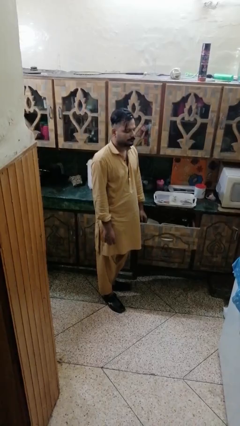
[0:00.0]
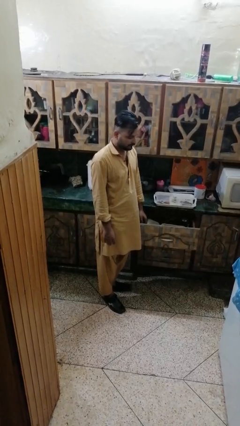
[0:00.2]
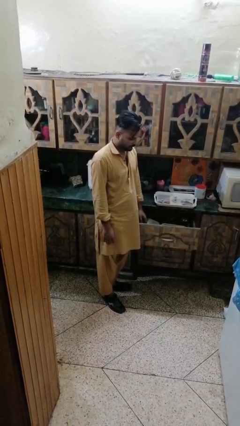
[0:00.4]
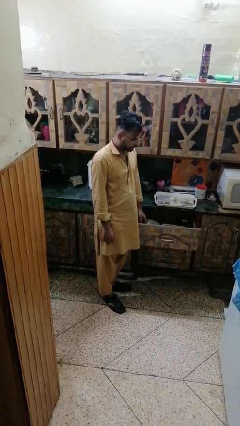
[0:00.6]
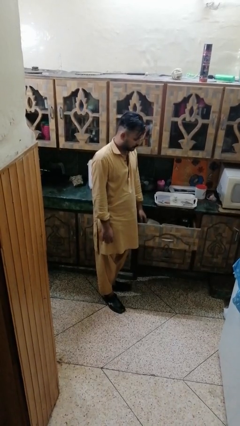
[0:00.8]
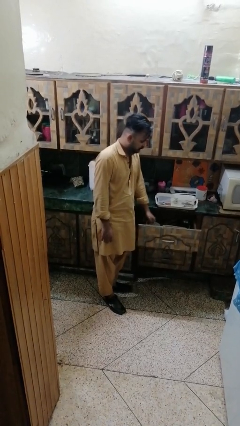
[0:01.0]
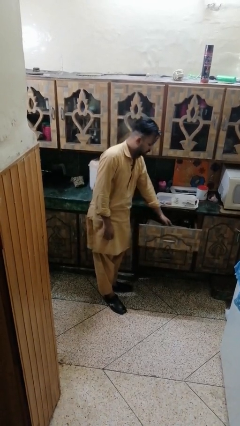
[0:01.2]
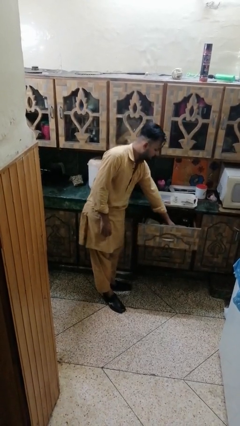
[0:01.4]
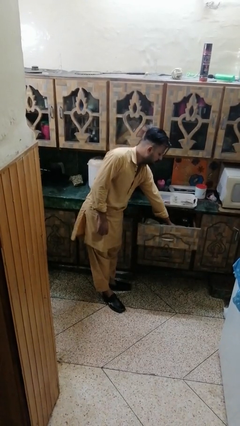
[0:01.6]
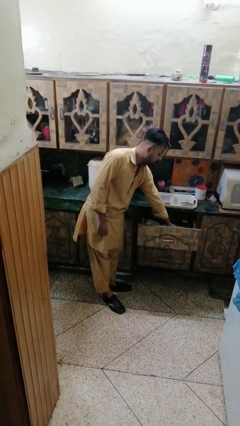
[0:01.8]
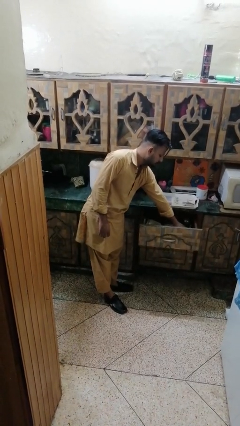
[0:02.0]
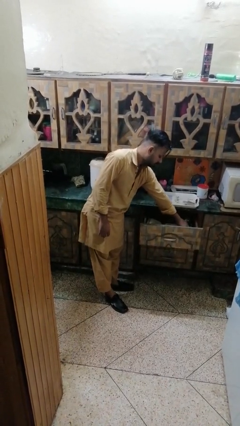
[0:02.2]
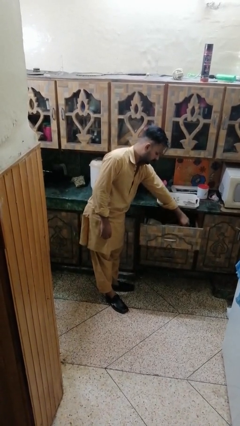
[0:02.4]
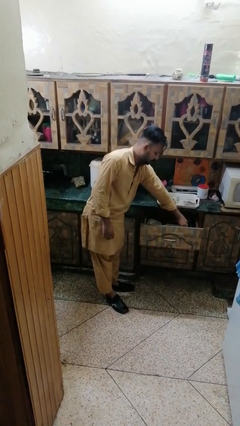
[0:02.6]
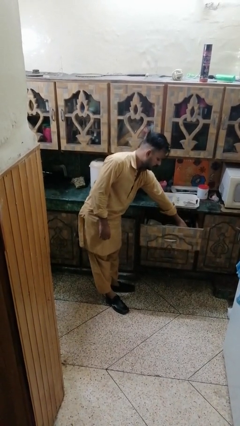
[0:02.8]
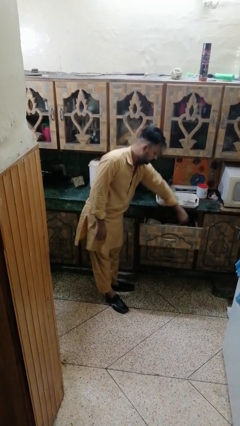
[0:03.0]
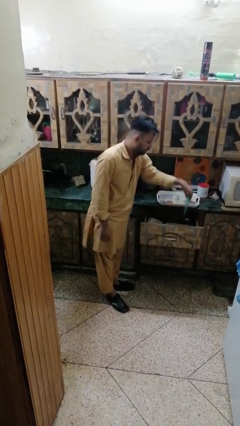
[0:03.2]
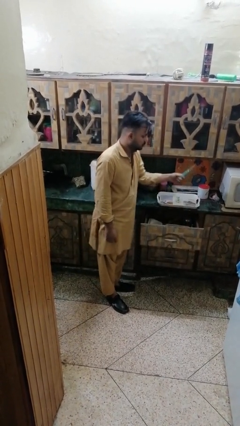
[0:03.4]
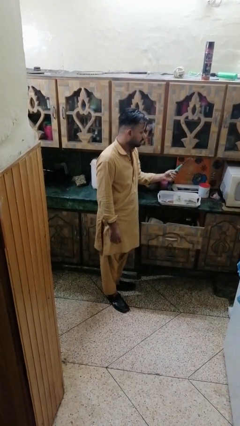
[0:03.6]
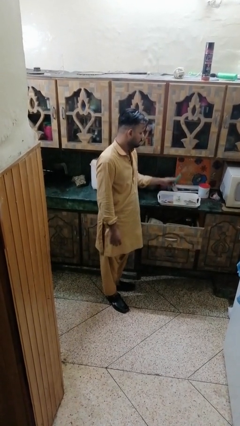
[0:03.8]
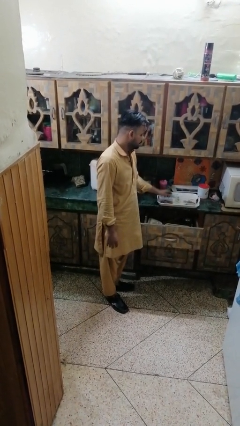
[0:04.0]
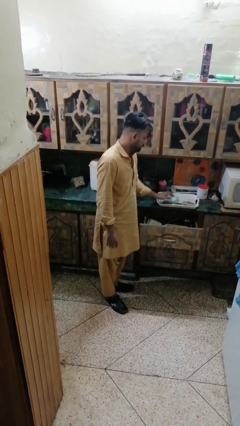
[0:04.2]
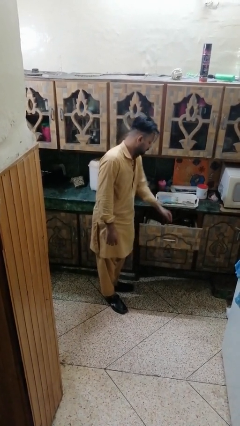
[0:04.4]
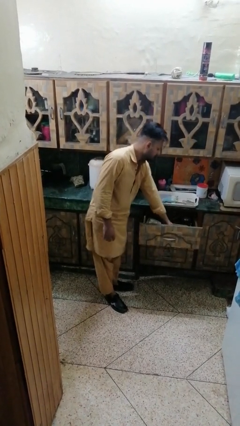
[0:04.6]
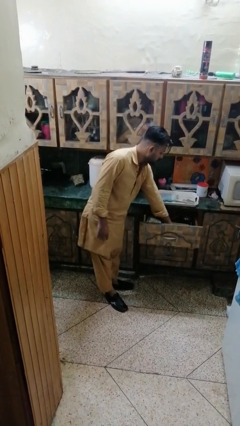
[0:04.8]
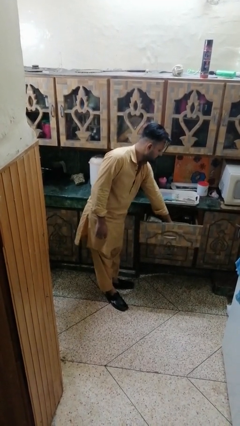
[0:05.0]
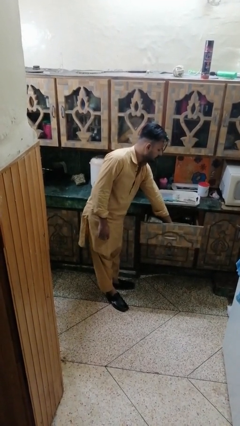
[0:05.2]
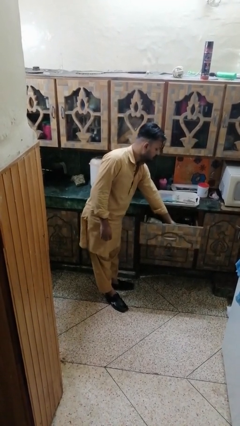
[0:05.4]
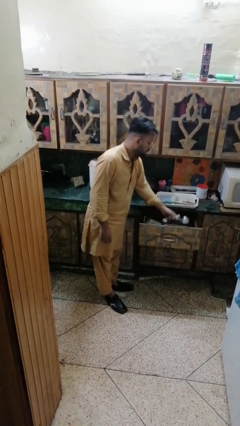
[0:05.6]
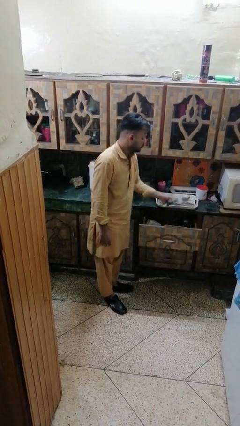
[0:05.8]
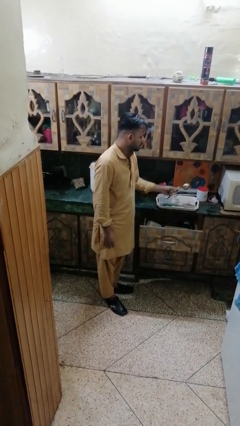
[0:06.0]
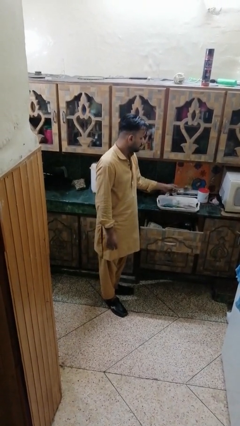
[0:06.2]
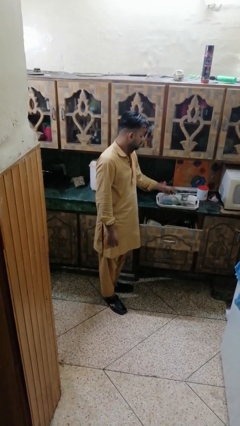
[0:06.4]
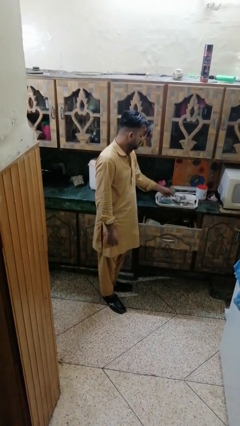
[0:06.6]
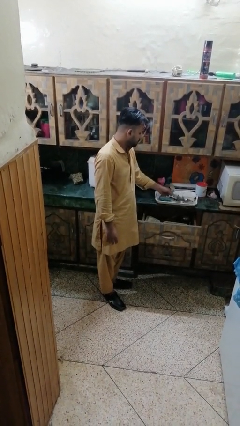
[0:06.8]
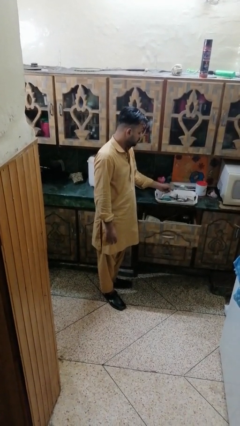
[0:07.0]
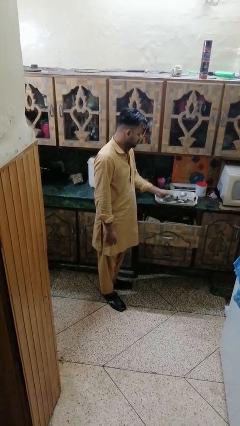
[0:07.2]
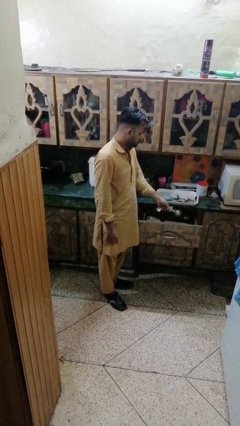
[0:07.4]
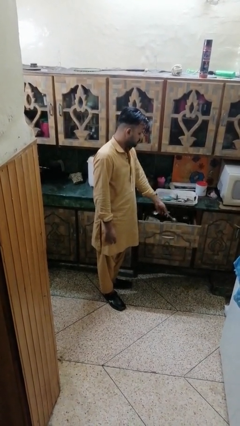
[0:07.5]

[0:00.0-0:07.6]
person takes object from kitchen drawer

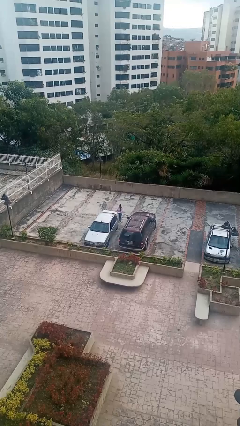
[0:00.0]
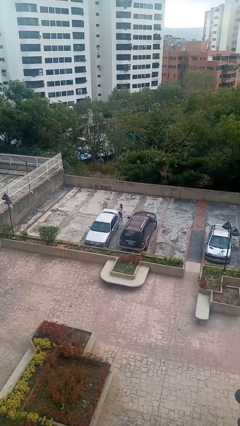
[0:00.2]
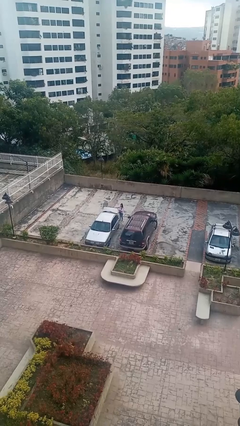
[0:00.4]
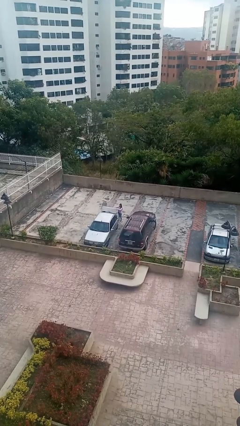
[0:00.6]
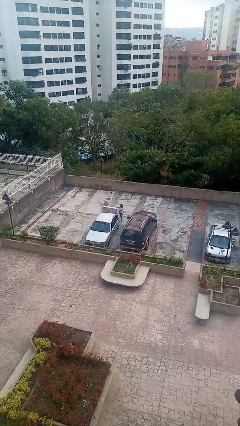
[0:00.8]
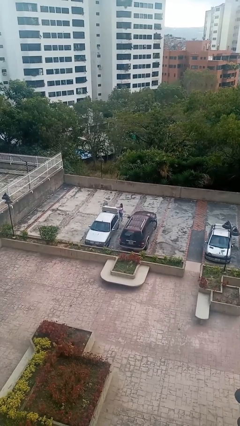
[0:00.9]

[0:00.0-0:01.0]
person opens car trunk

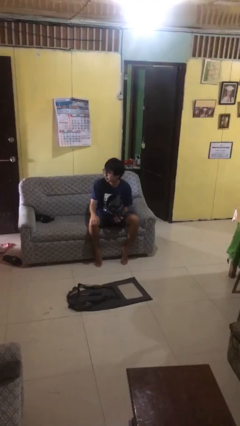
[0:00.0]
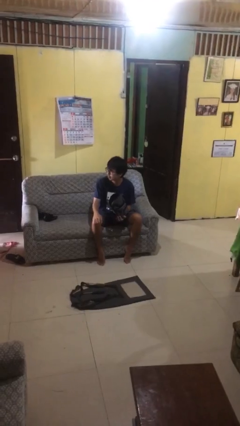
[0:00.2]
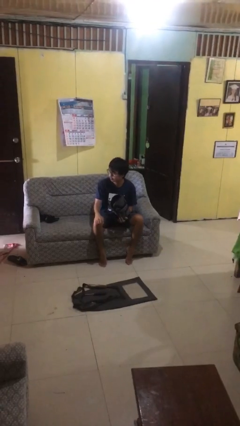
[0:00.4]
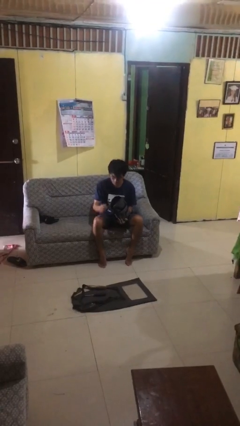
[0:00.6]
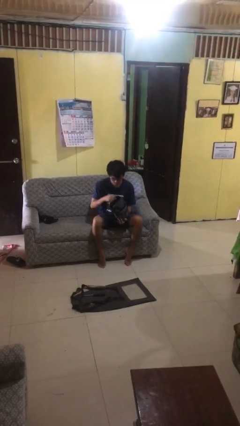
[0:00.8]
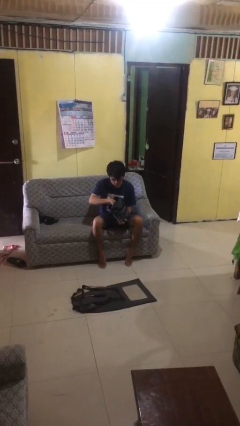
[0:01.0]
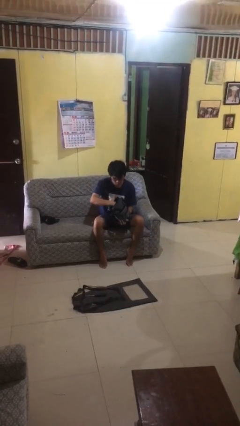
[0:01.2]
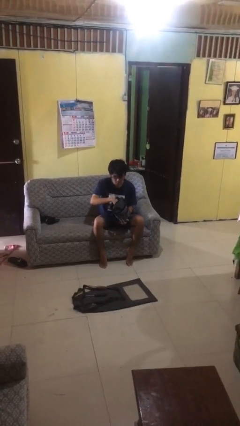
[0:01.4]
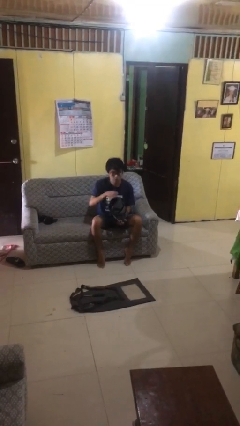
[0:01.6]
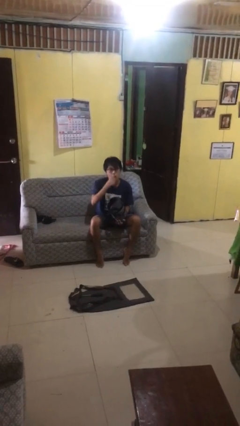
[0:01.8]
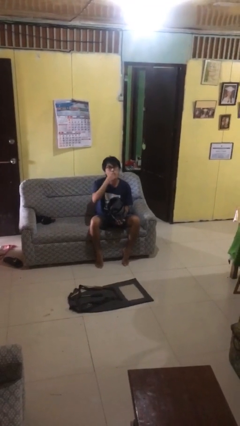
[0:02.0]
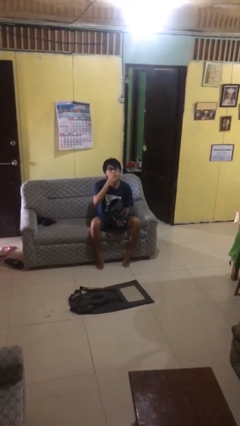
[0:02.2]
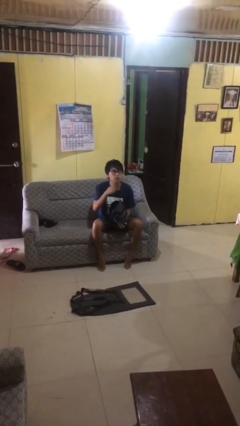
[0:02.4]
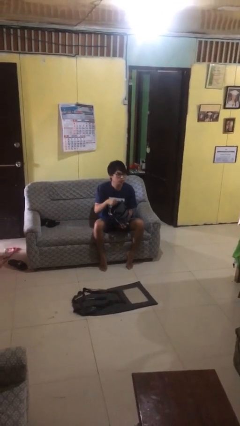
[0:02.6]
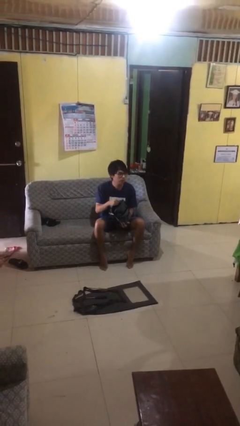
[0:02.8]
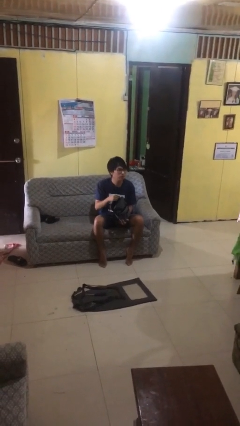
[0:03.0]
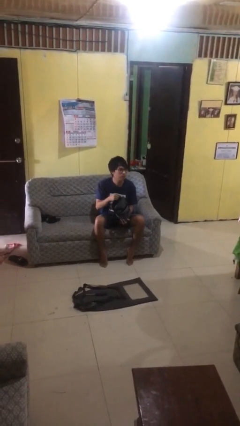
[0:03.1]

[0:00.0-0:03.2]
person eats snack from bag

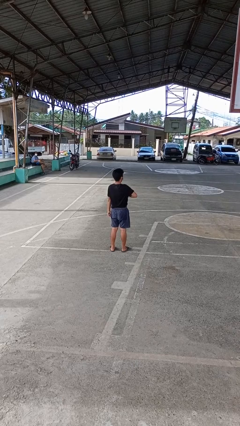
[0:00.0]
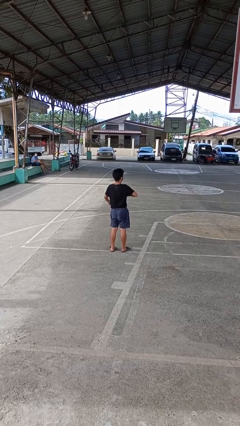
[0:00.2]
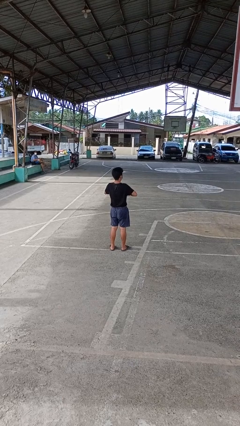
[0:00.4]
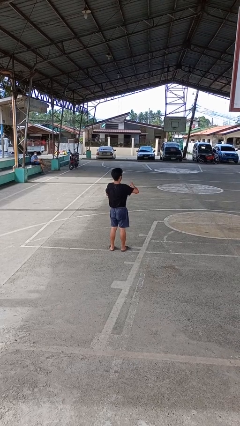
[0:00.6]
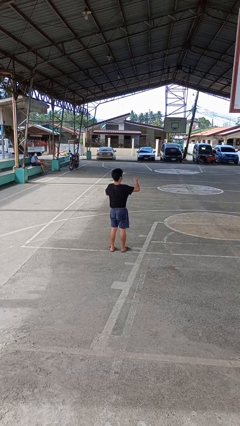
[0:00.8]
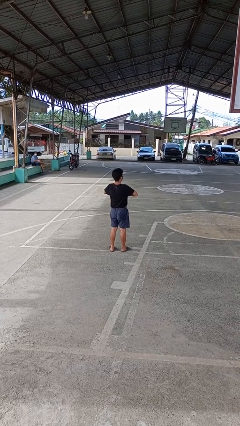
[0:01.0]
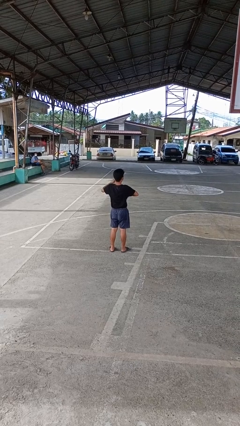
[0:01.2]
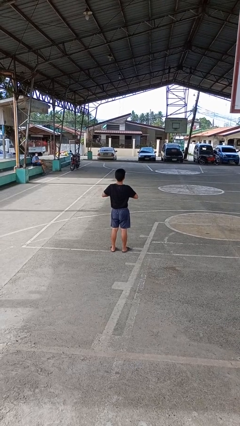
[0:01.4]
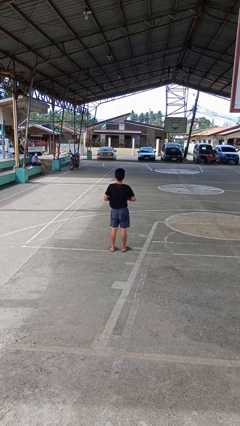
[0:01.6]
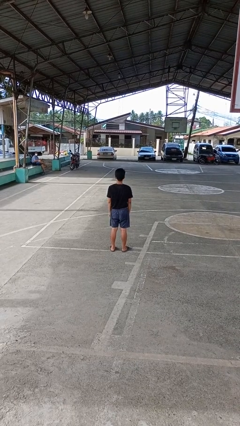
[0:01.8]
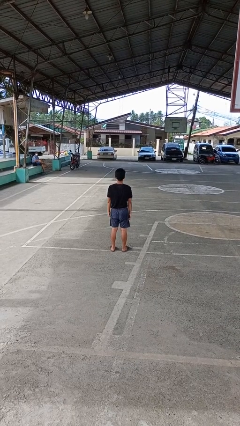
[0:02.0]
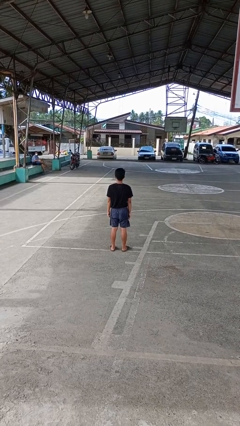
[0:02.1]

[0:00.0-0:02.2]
person drums on chest

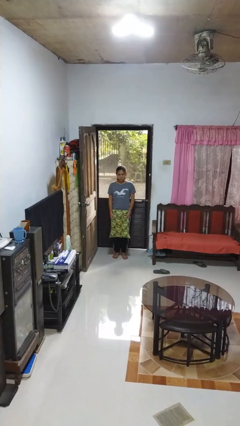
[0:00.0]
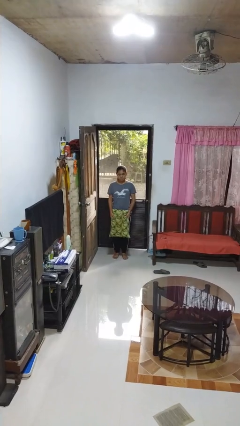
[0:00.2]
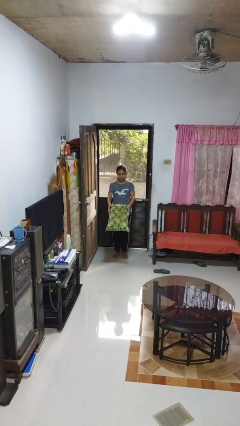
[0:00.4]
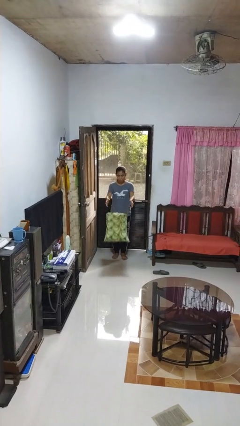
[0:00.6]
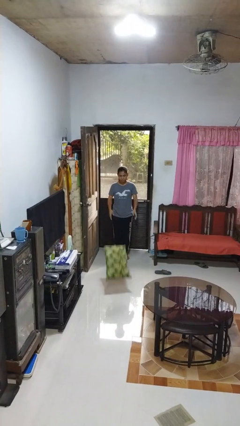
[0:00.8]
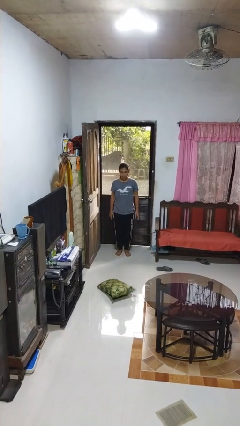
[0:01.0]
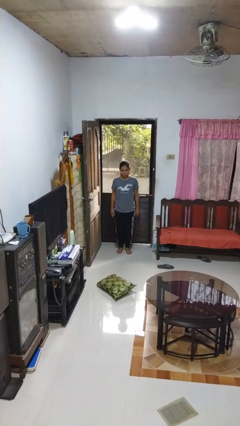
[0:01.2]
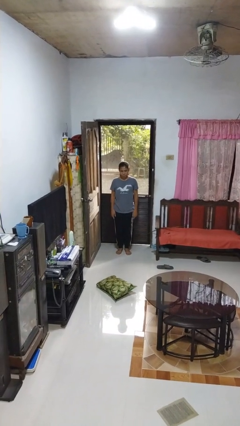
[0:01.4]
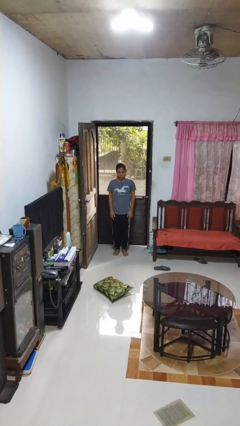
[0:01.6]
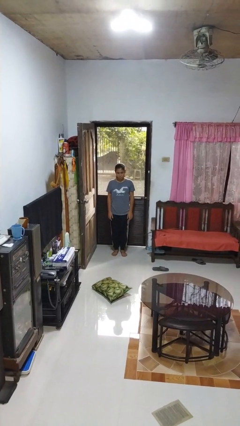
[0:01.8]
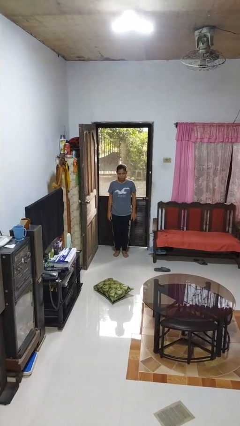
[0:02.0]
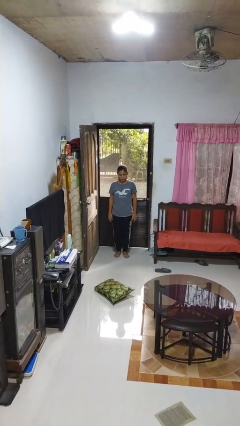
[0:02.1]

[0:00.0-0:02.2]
person throws object into air

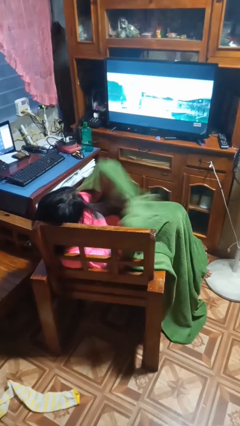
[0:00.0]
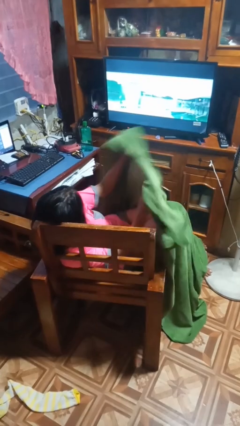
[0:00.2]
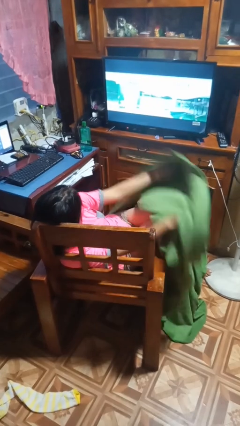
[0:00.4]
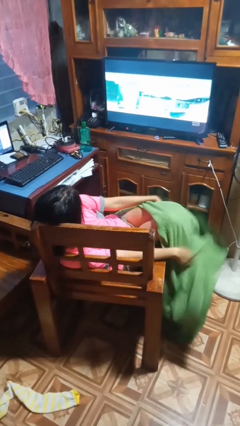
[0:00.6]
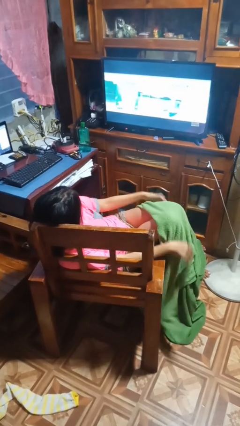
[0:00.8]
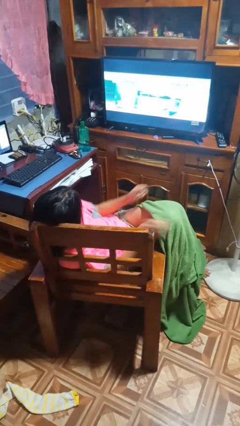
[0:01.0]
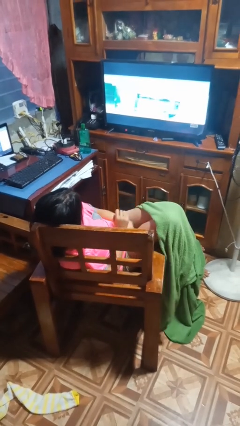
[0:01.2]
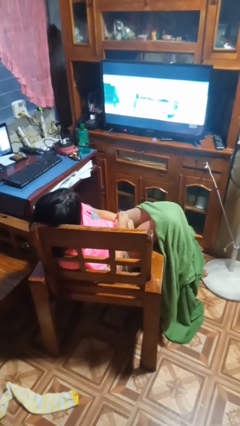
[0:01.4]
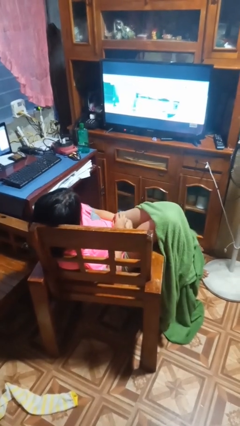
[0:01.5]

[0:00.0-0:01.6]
person uncovers with blanket
